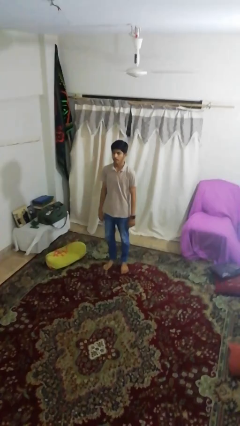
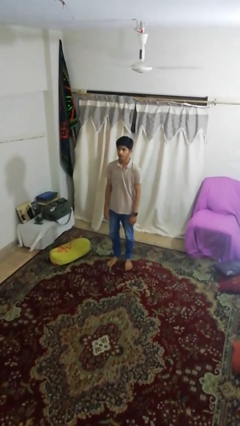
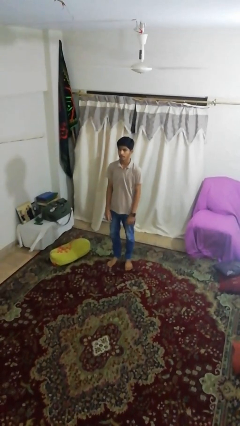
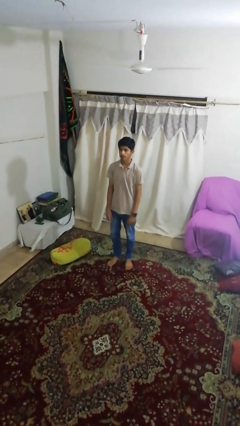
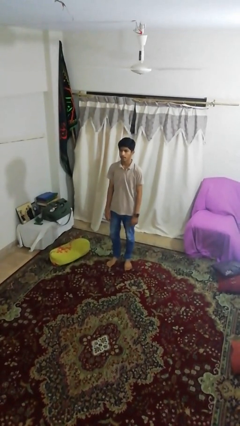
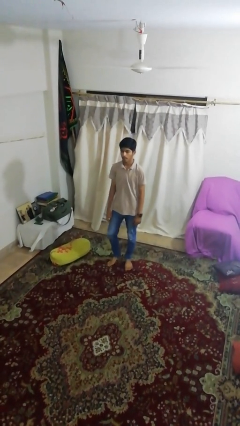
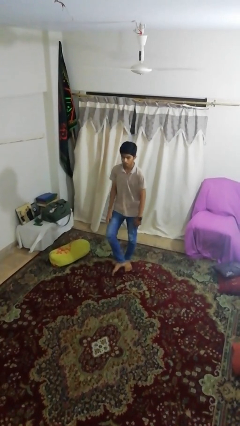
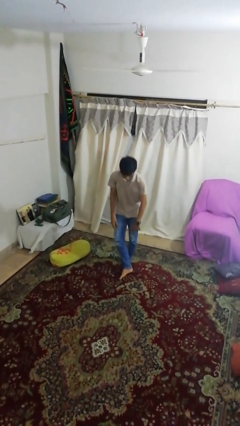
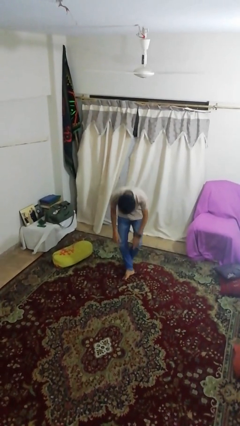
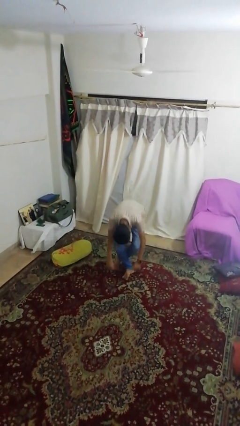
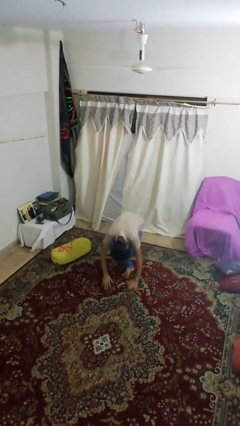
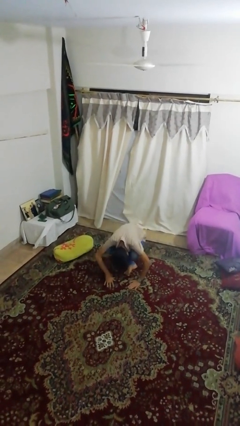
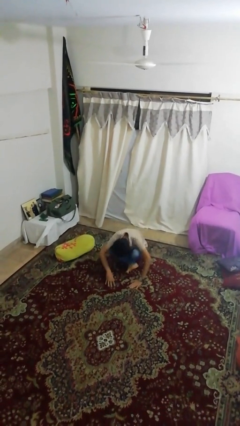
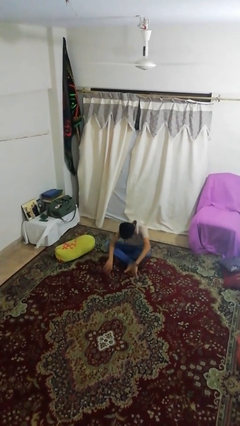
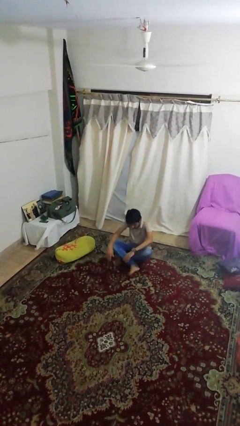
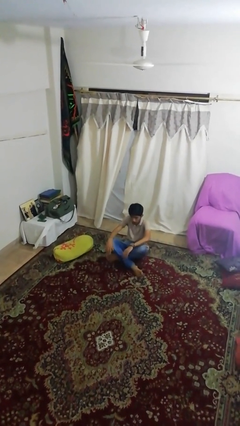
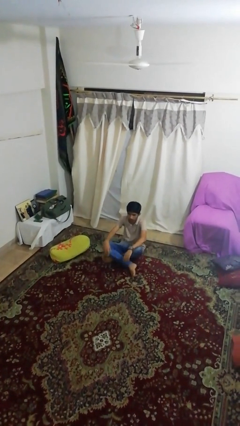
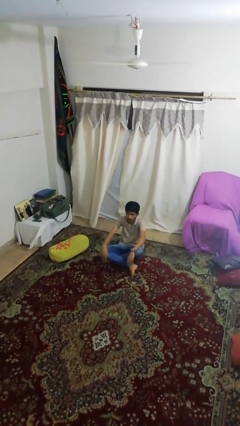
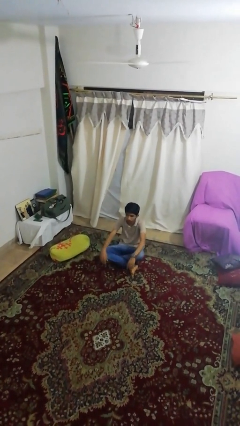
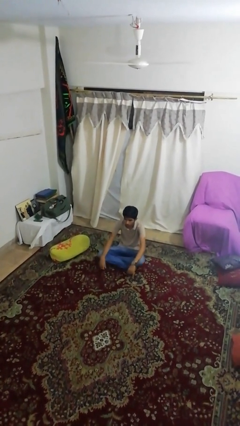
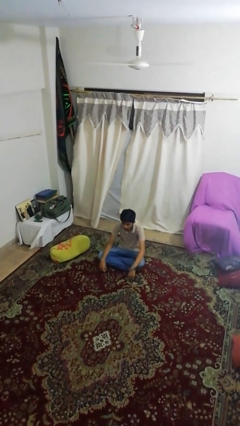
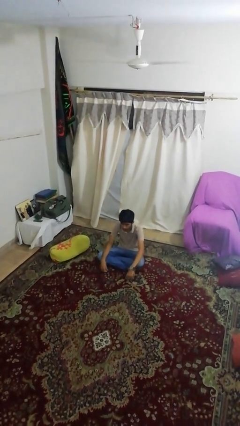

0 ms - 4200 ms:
person sits crisscross

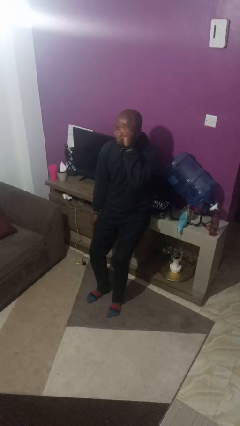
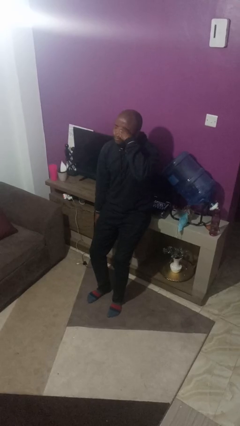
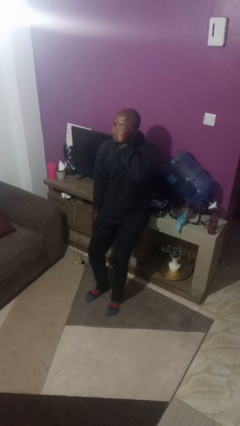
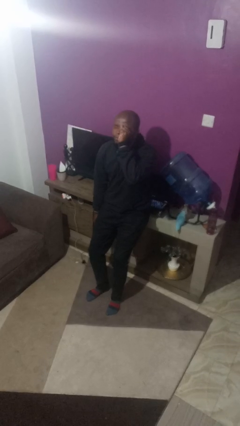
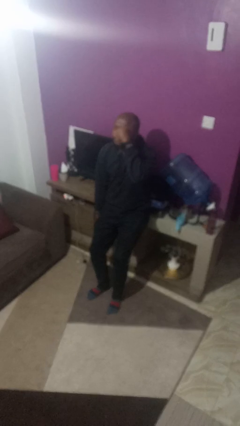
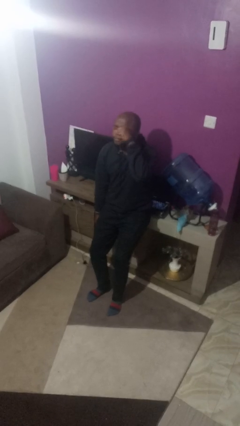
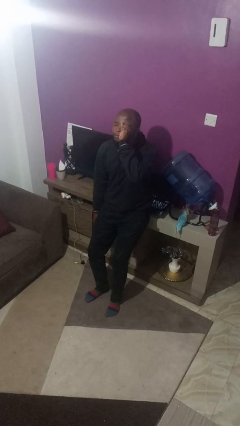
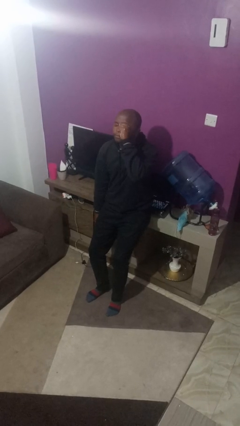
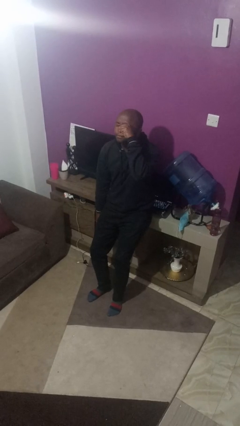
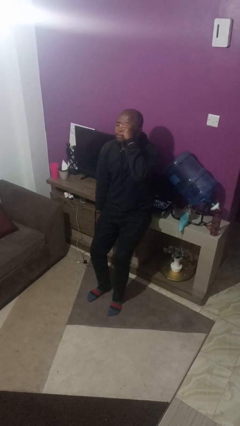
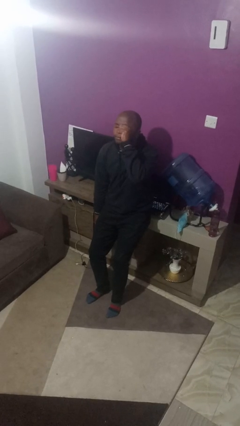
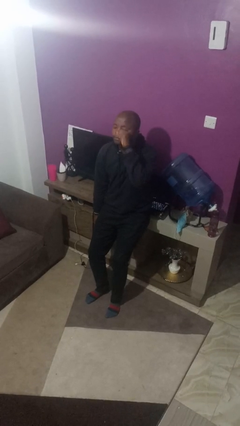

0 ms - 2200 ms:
person rubs eyes

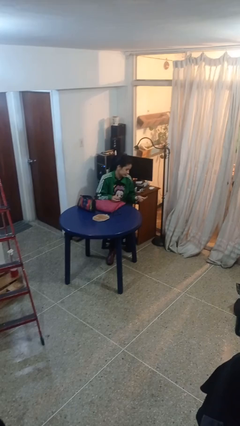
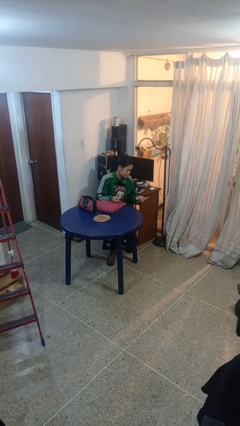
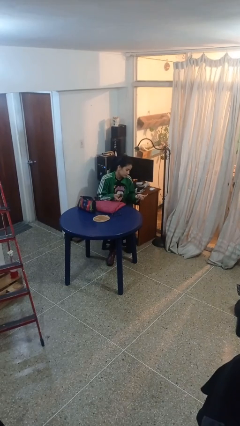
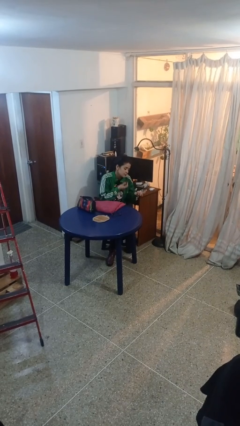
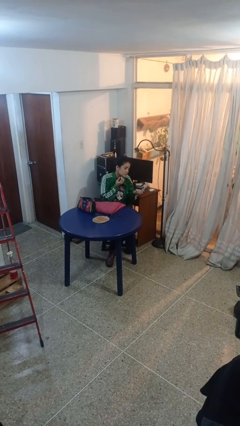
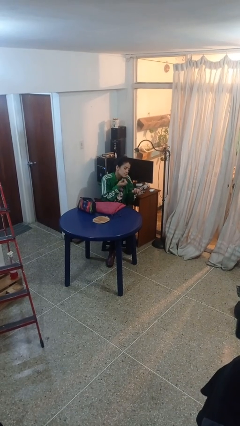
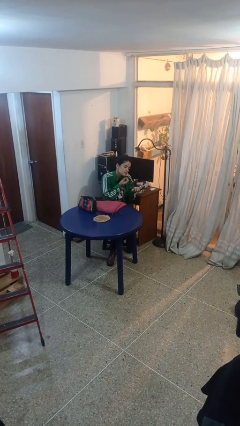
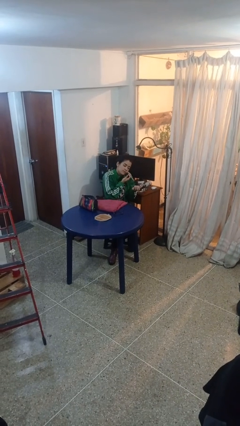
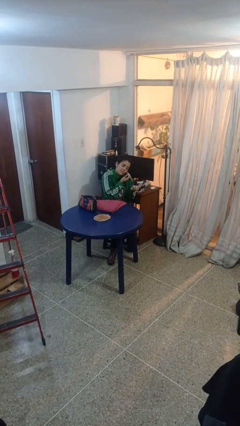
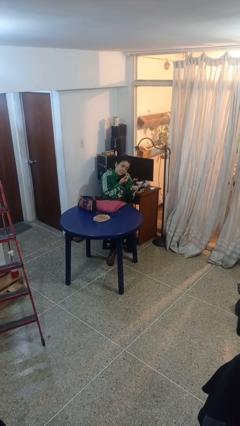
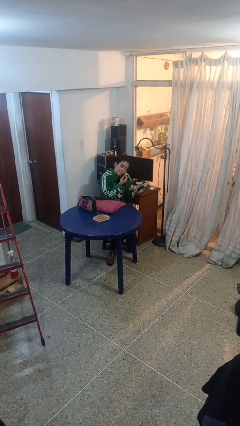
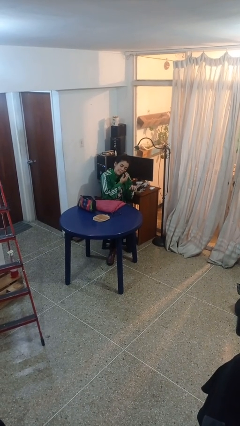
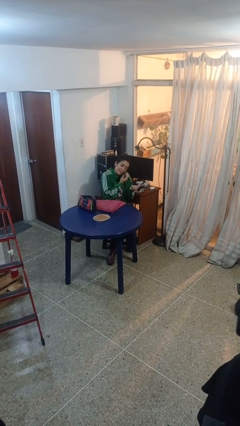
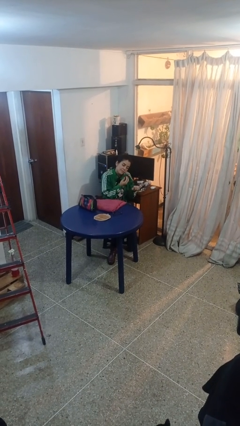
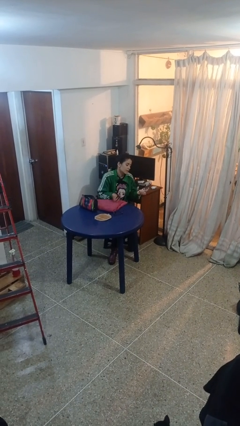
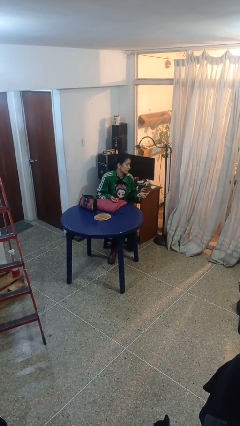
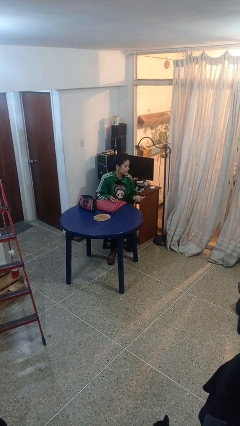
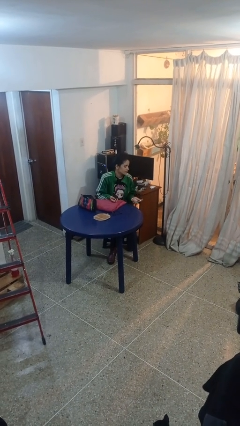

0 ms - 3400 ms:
person applies foundation makeup

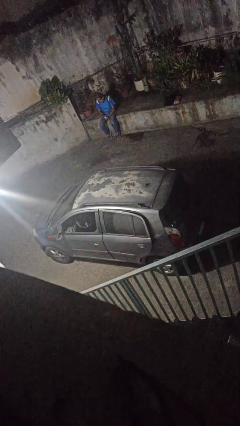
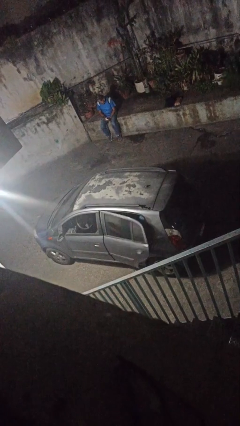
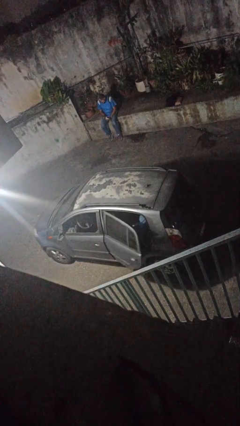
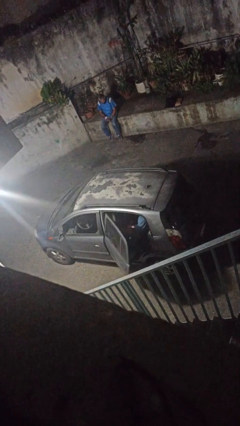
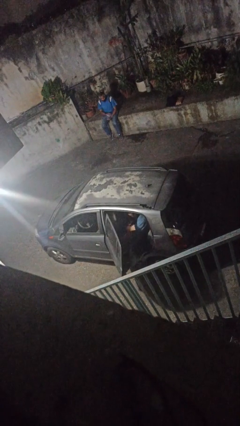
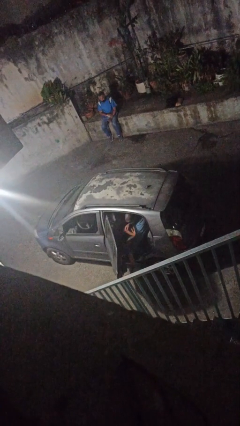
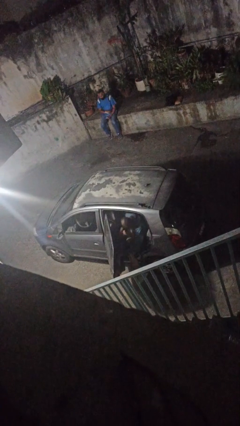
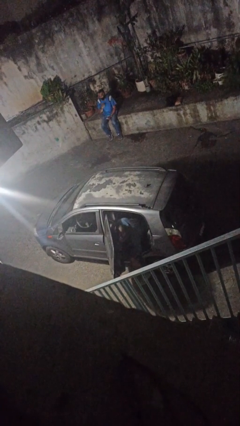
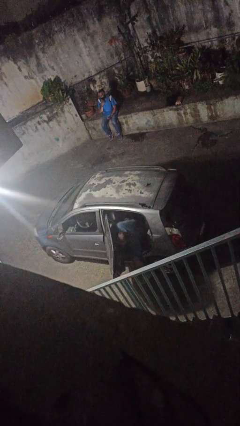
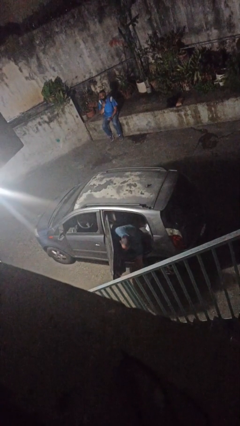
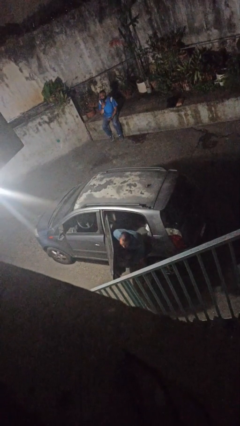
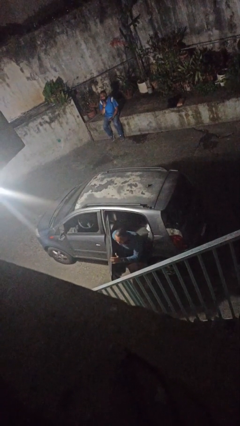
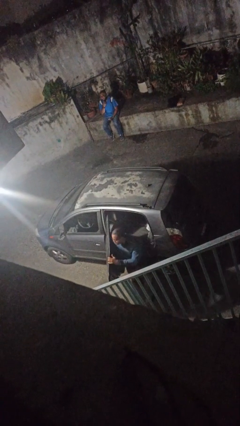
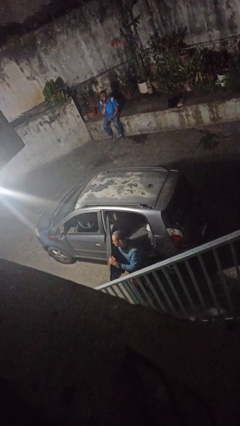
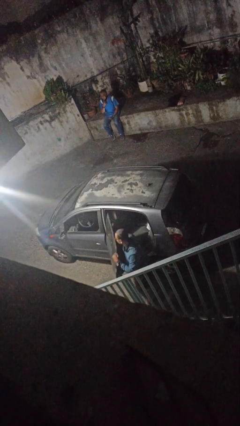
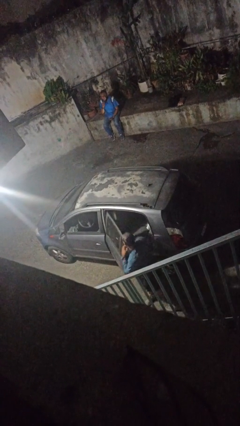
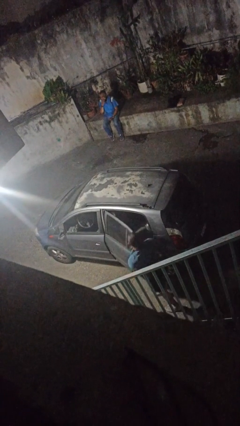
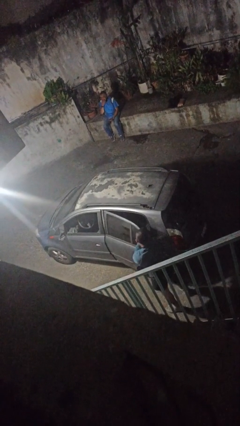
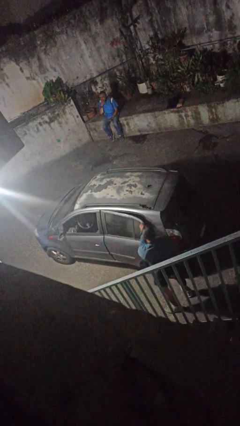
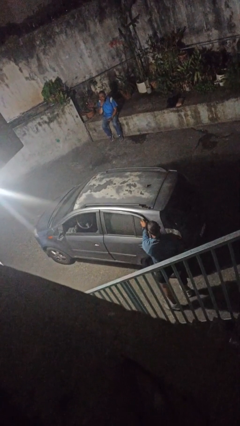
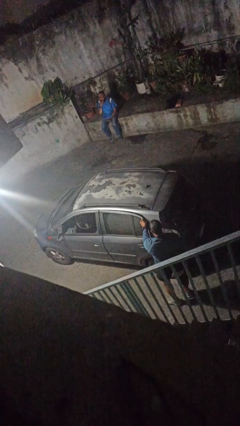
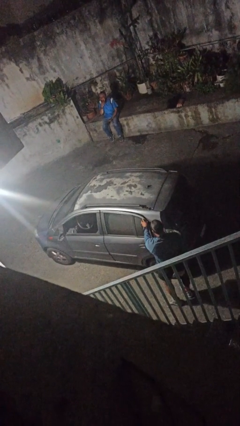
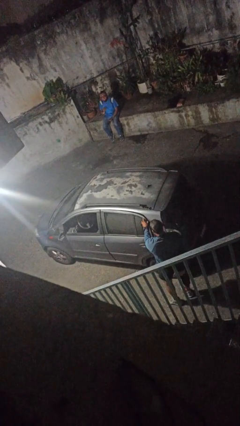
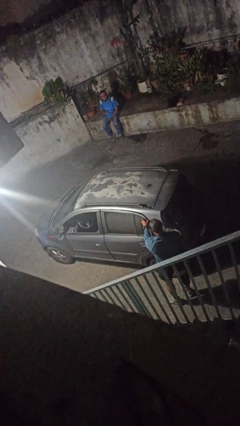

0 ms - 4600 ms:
car drops off person

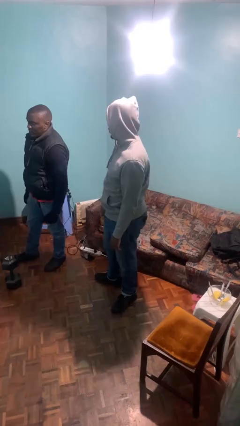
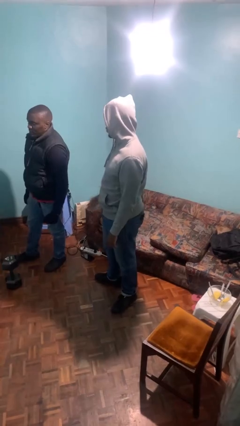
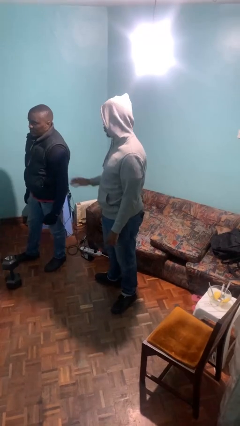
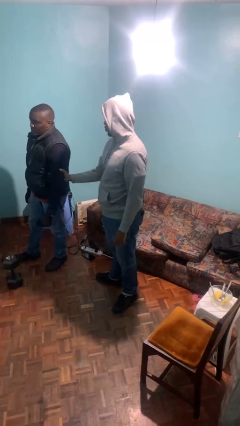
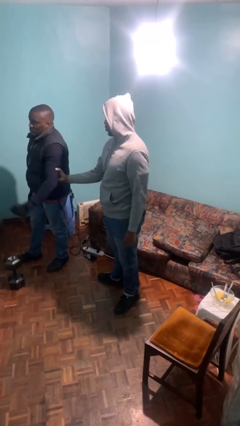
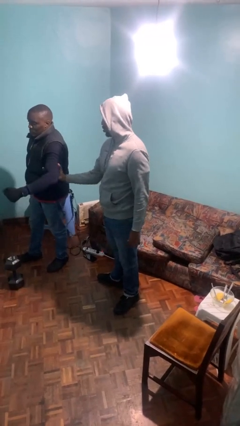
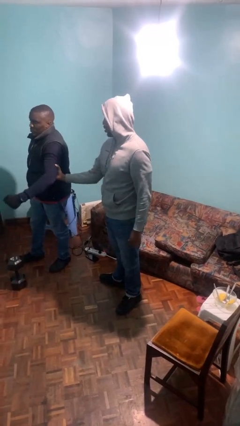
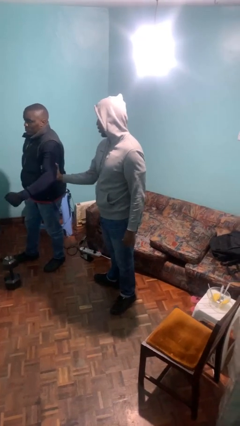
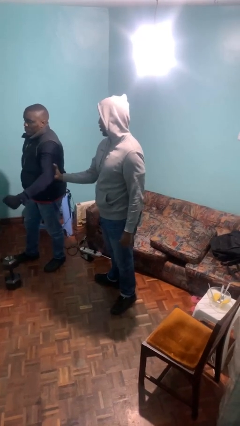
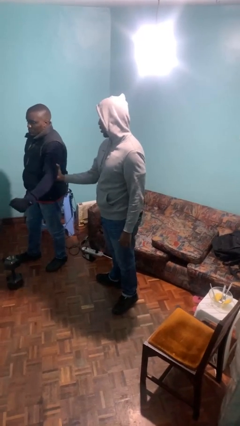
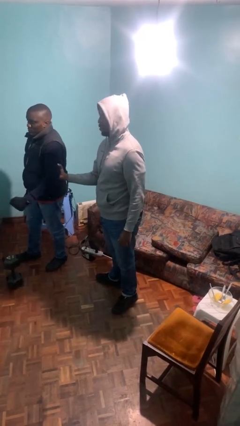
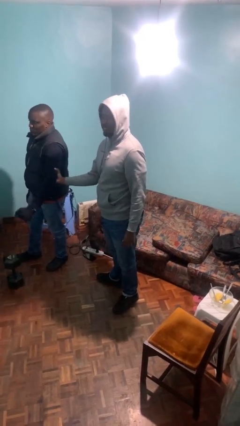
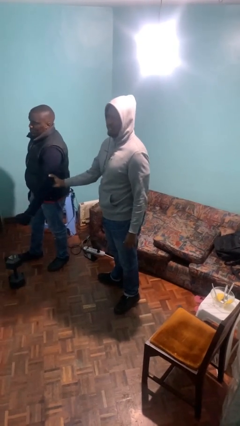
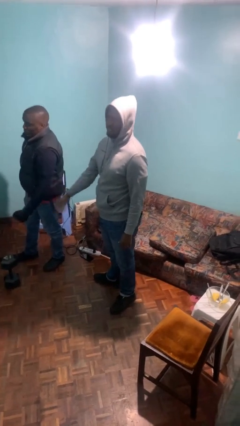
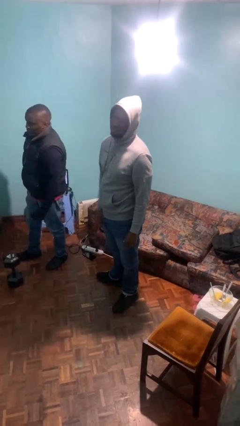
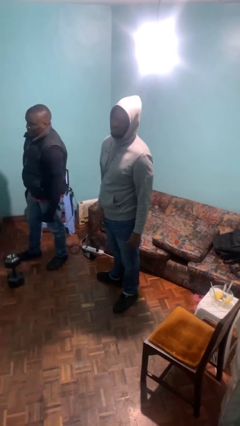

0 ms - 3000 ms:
person grabs person by bicep
